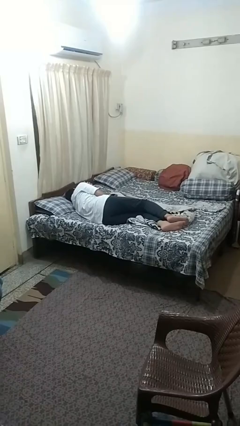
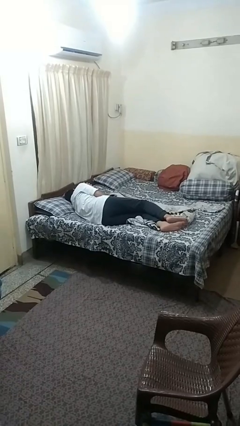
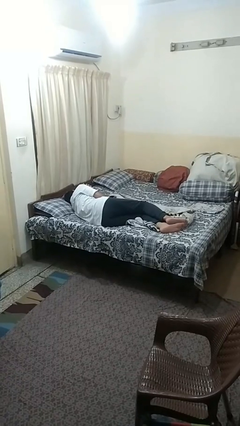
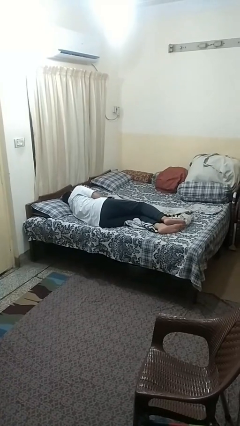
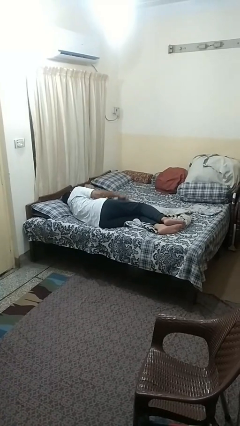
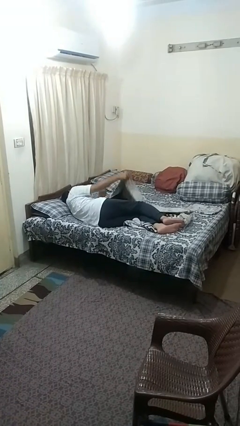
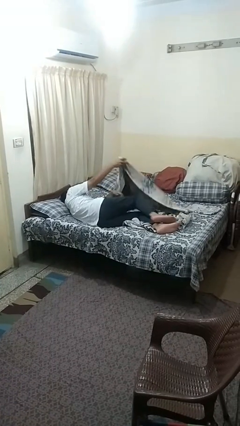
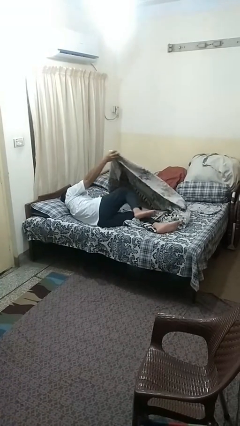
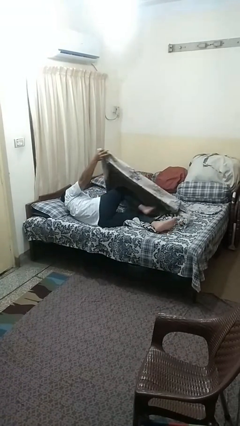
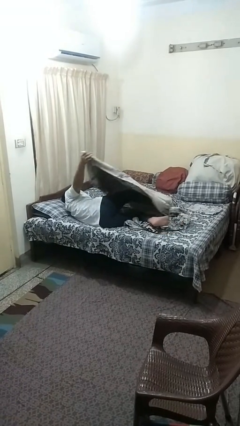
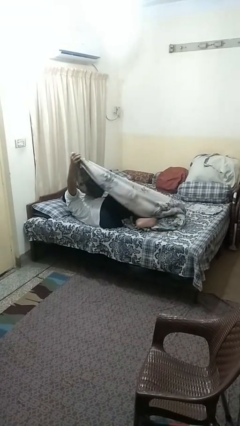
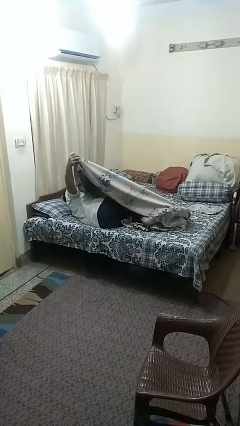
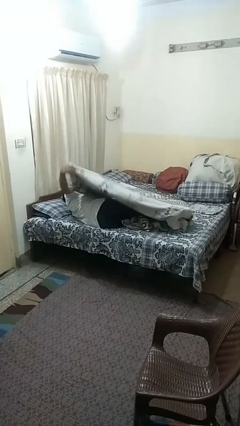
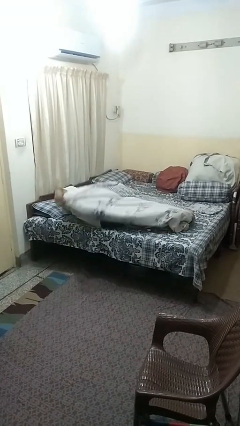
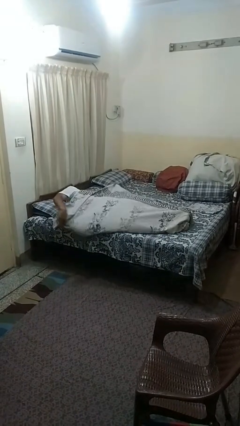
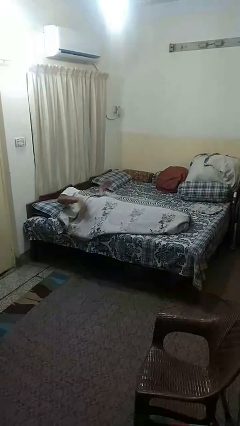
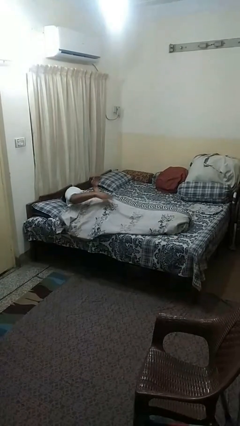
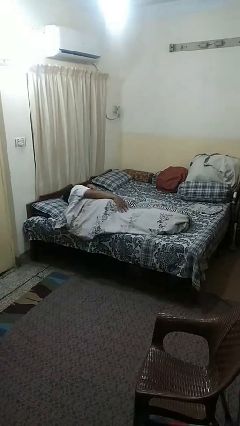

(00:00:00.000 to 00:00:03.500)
person covers with bedsheets

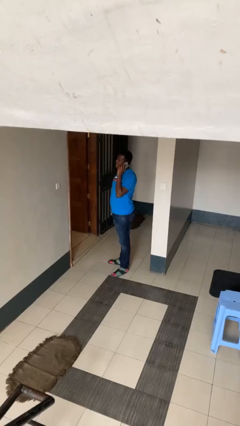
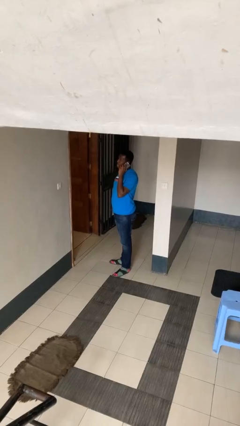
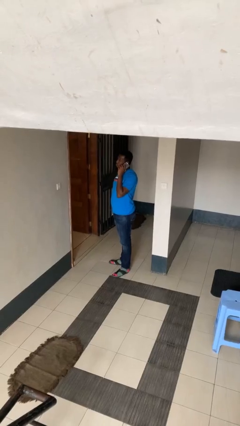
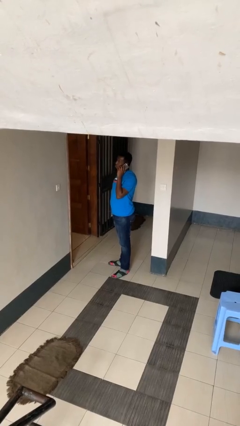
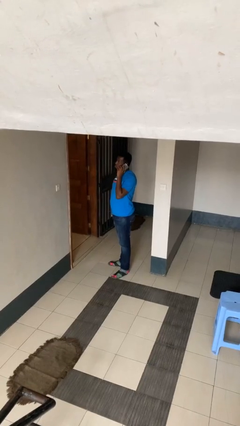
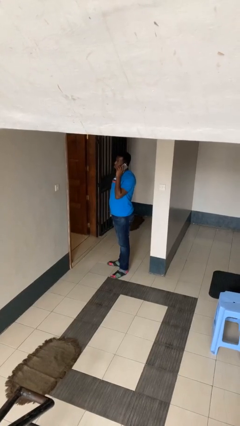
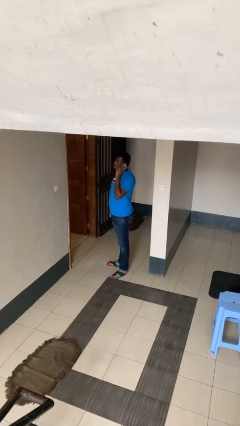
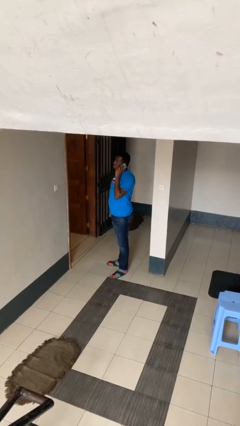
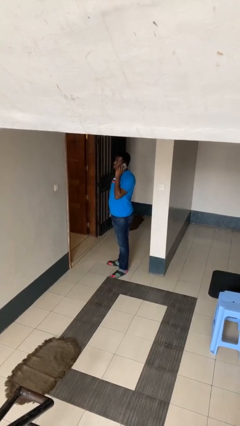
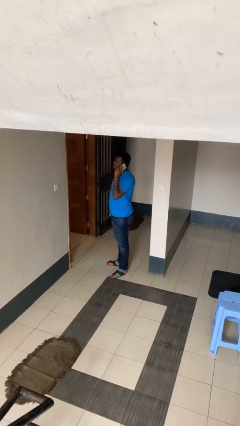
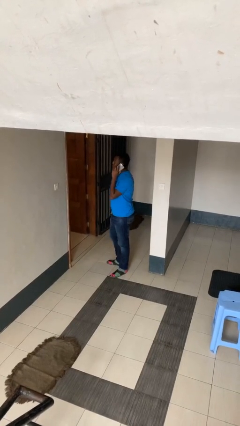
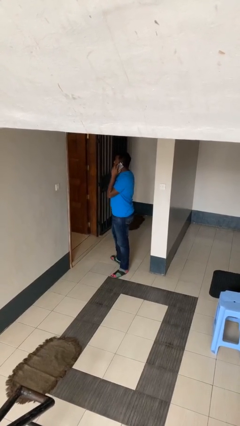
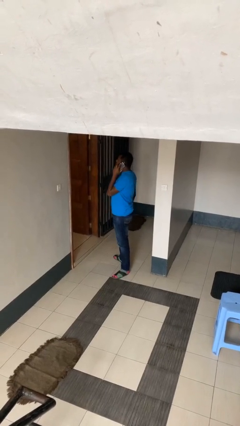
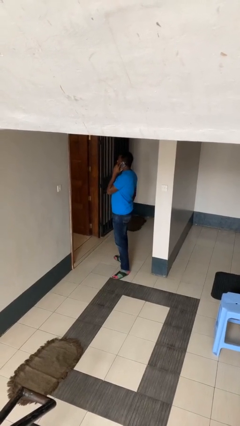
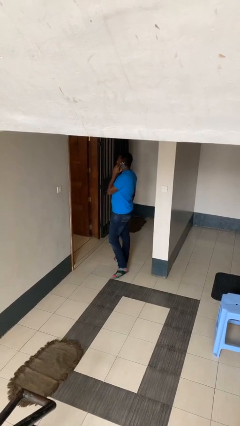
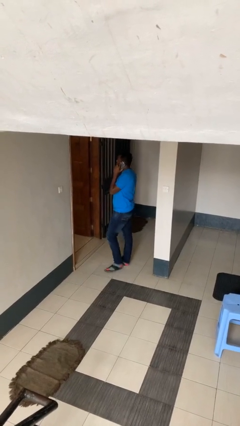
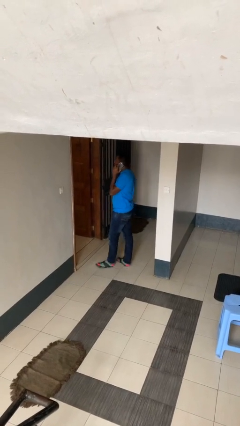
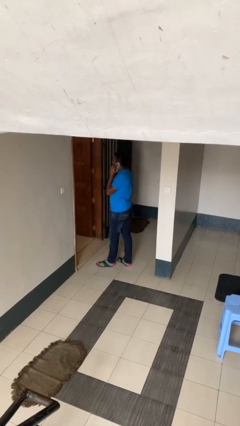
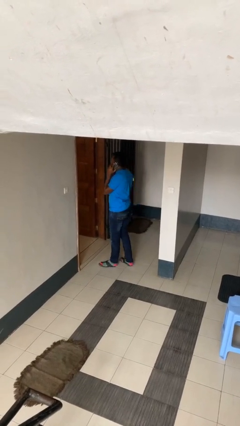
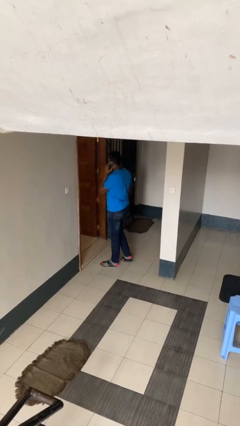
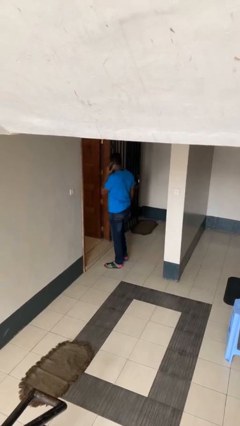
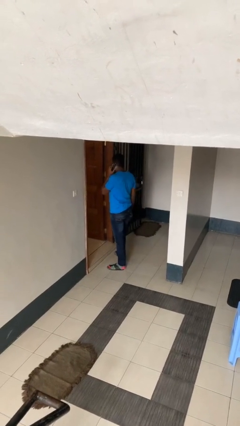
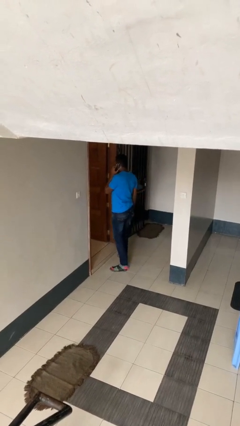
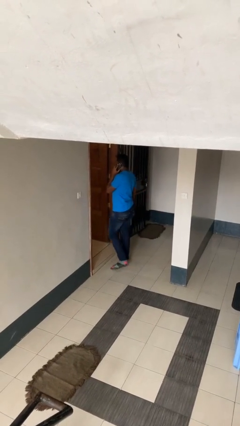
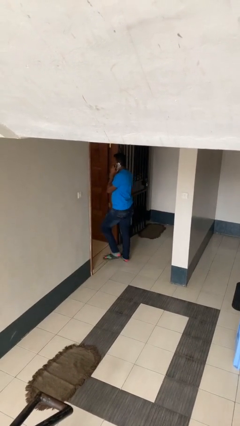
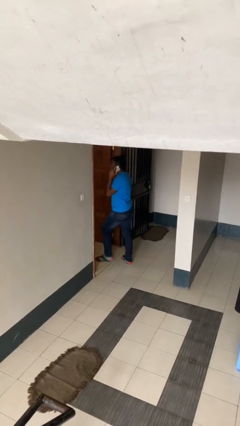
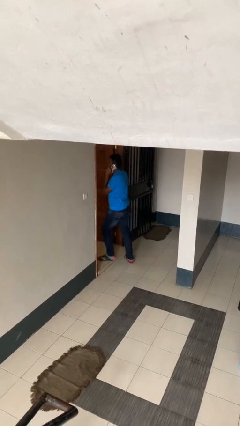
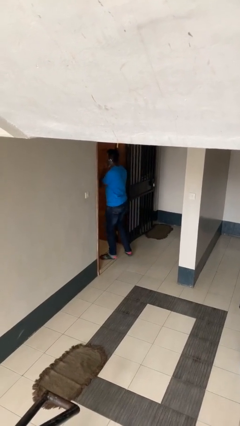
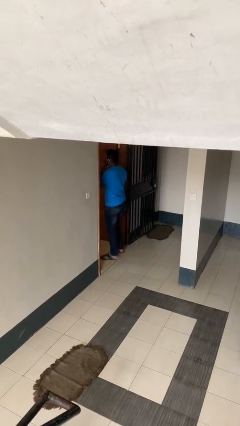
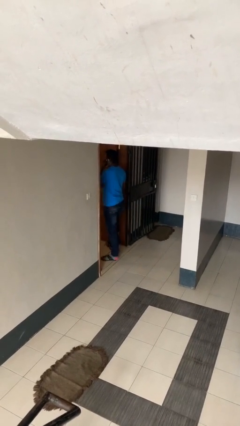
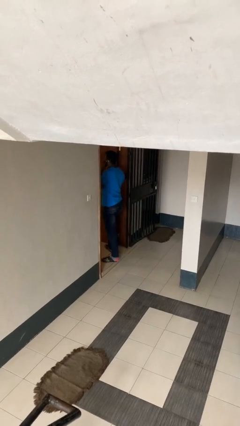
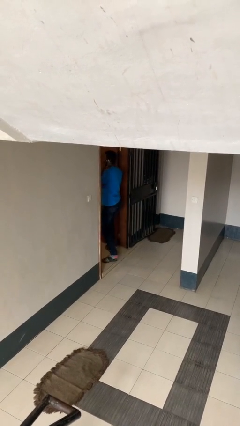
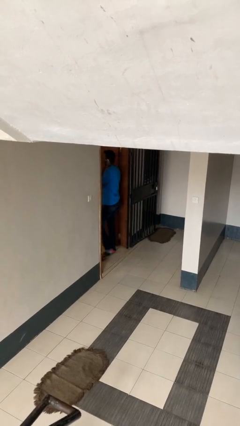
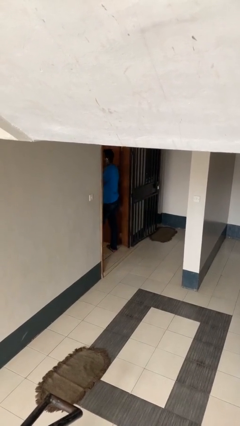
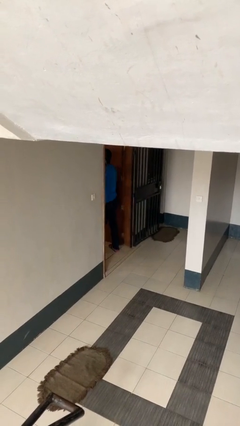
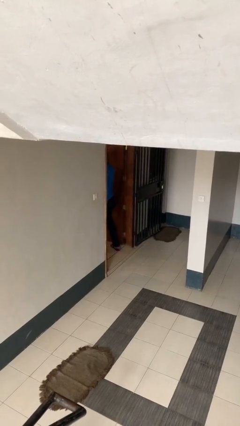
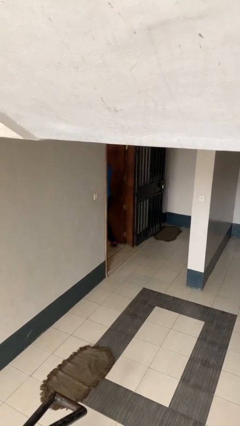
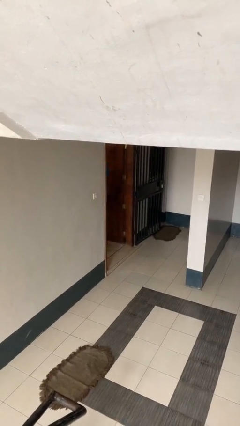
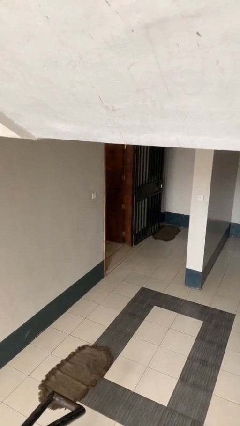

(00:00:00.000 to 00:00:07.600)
person exits scene through structure

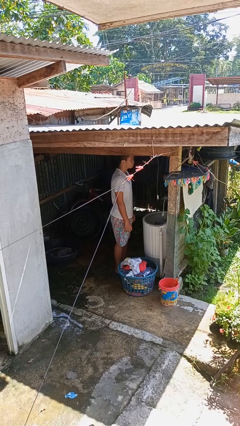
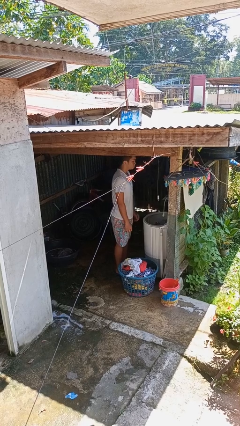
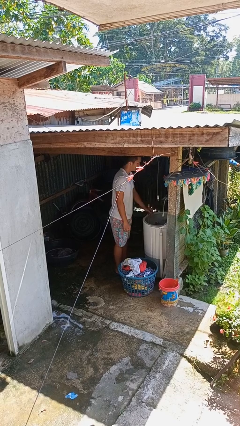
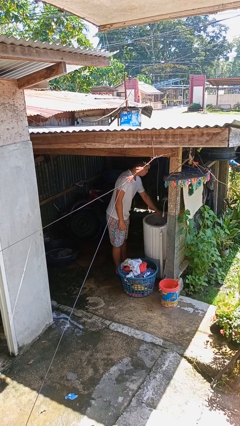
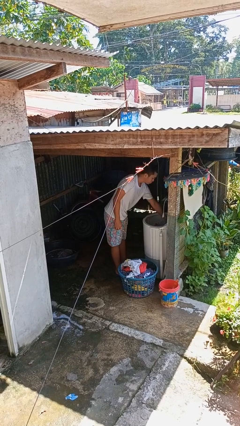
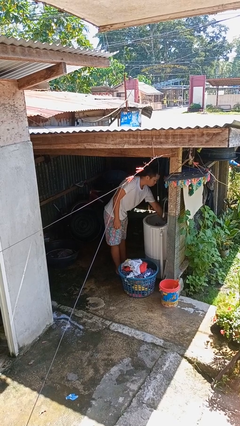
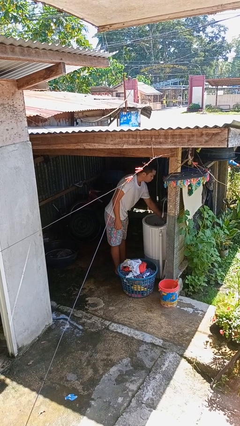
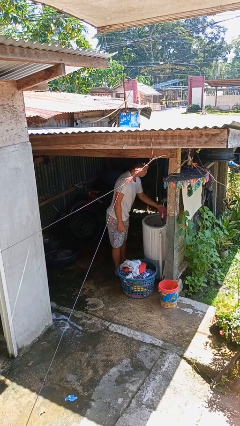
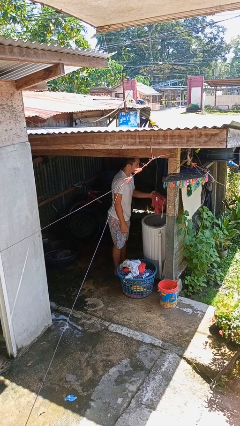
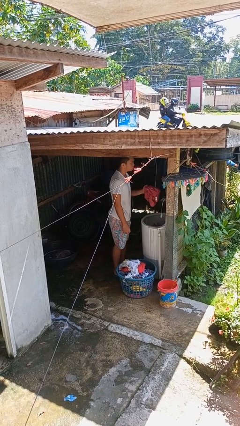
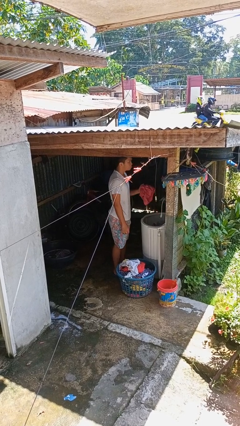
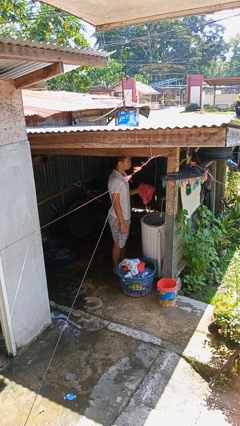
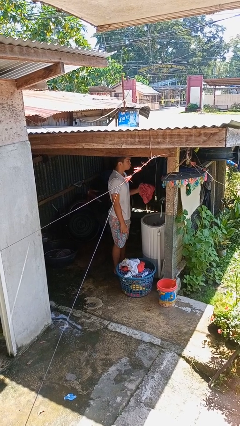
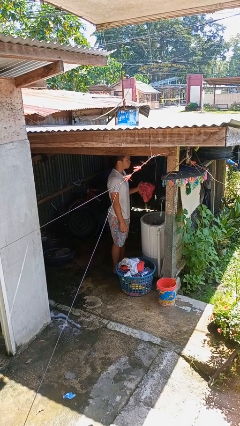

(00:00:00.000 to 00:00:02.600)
person unloads clotheswasher

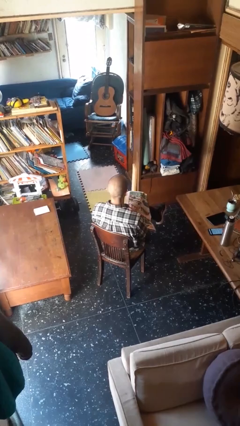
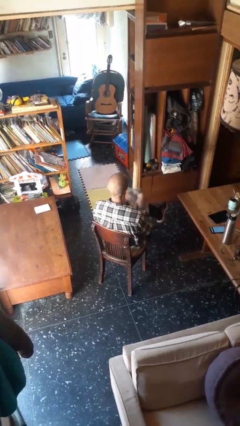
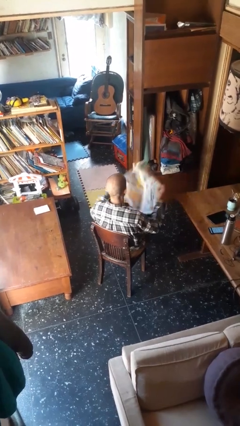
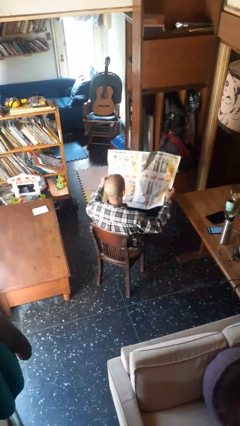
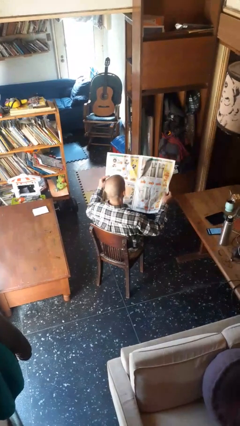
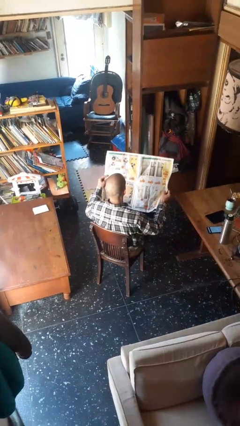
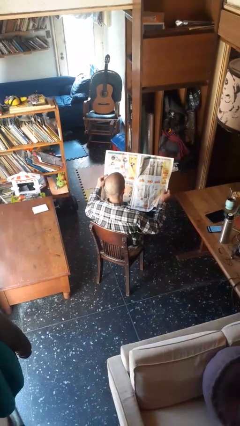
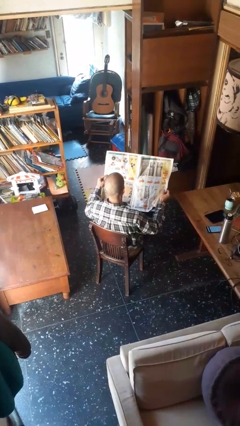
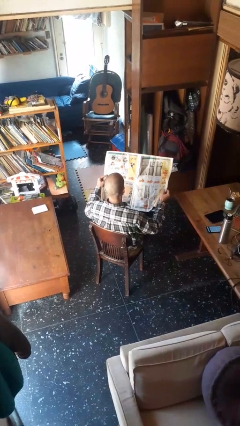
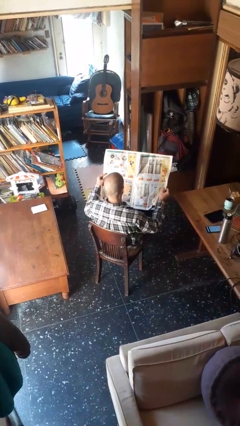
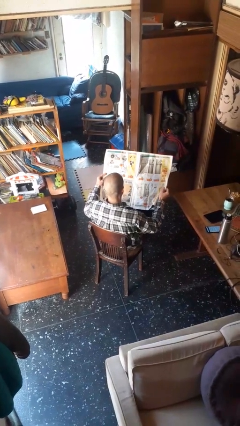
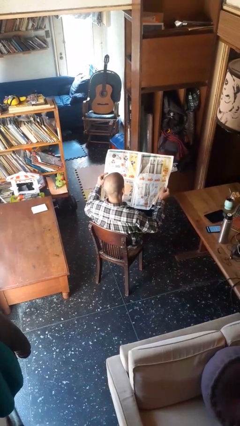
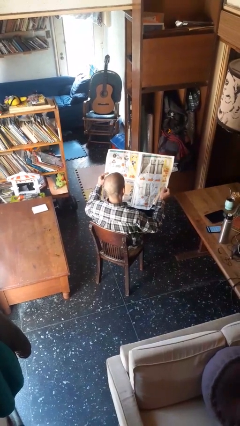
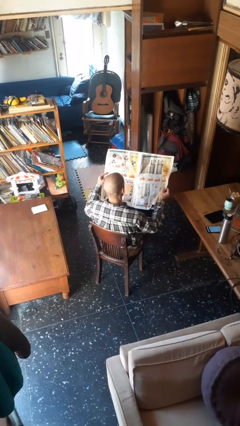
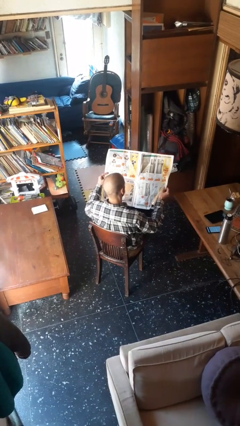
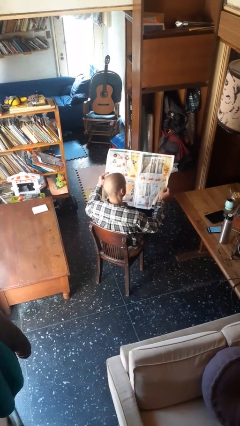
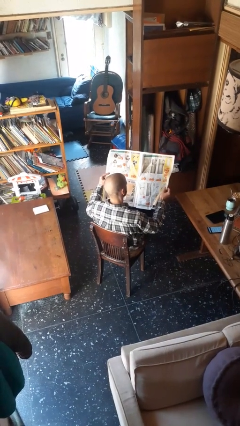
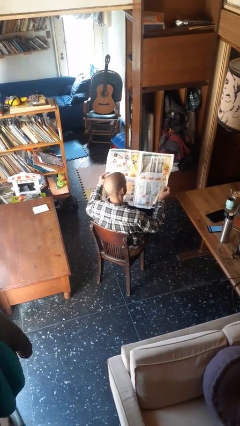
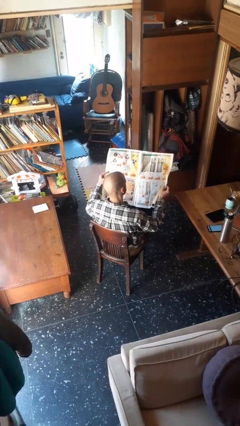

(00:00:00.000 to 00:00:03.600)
person reads newspaper

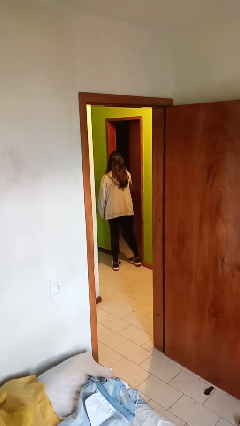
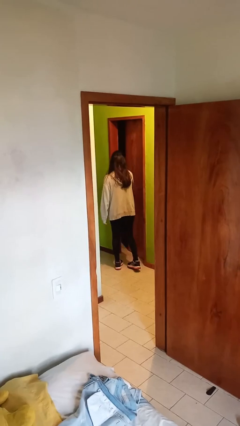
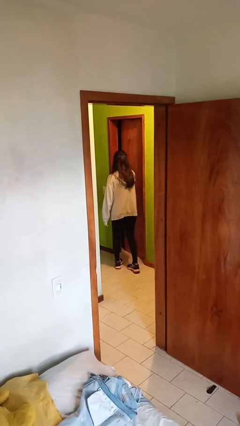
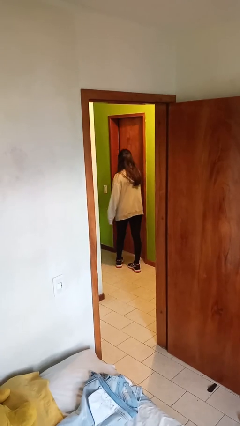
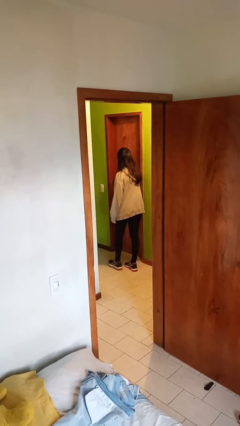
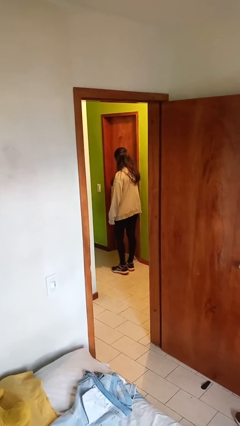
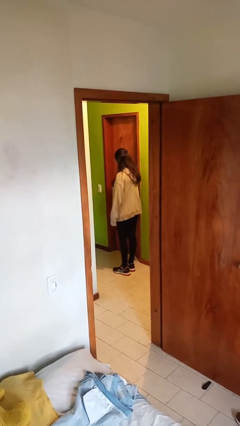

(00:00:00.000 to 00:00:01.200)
person closes facility door
